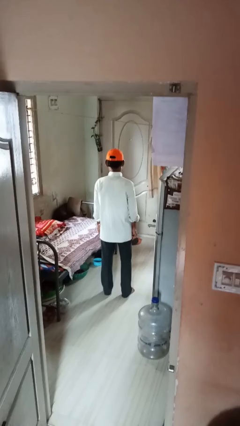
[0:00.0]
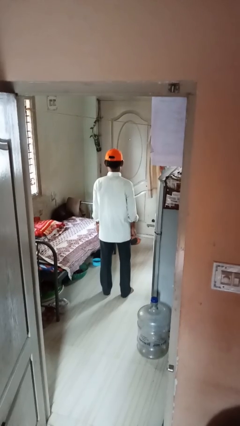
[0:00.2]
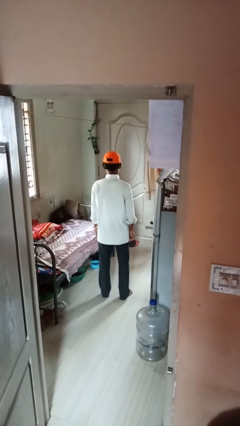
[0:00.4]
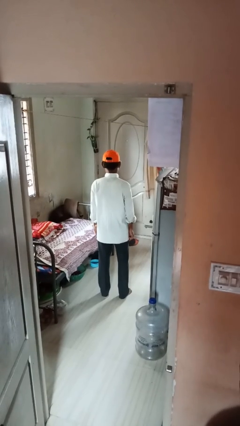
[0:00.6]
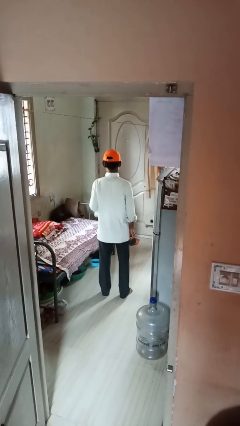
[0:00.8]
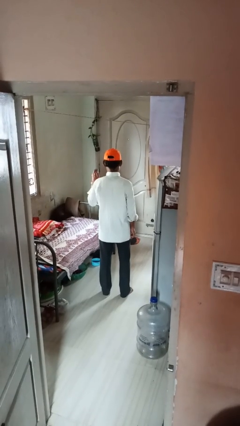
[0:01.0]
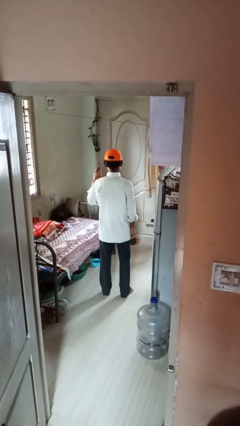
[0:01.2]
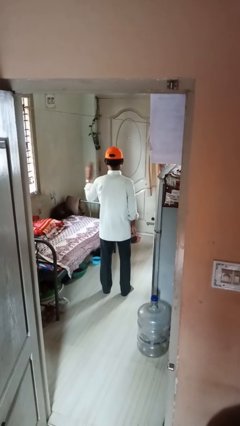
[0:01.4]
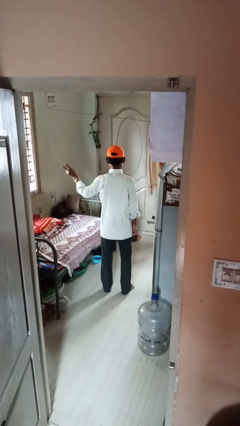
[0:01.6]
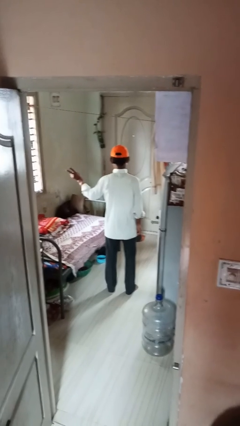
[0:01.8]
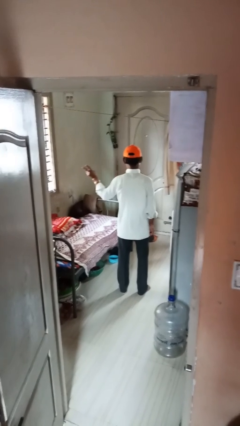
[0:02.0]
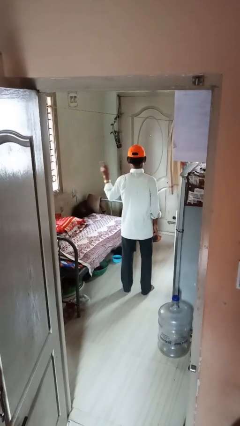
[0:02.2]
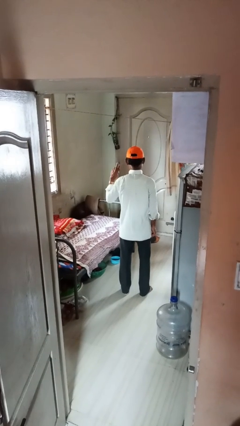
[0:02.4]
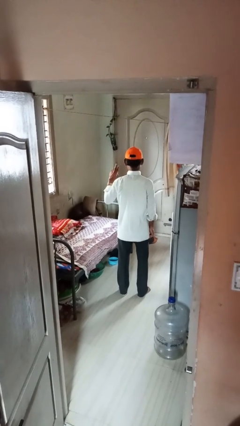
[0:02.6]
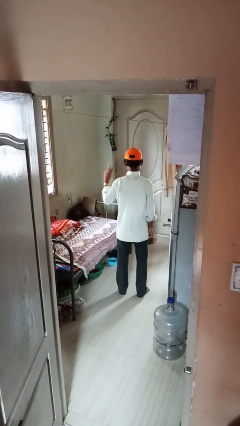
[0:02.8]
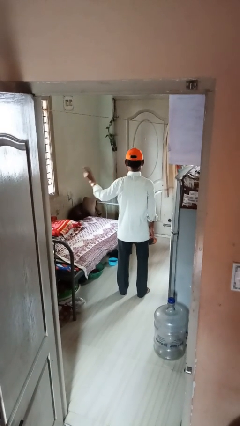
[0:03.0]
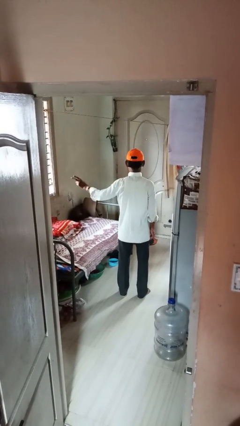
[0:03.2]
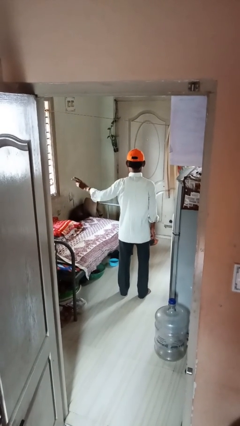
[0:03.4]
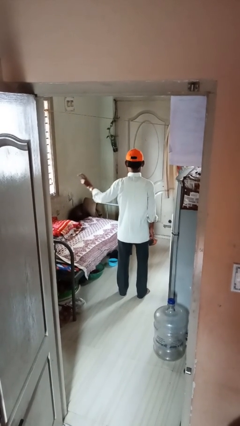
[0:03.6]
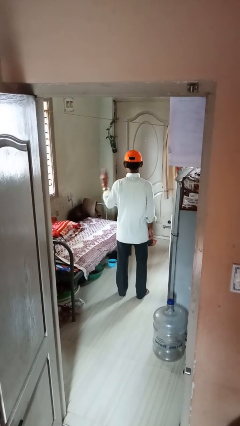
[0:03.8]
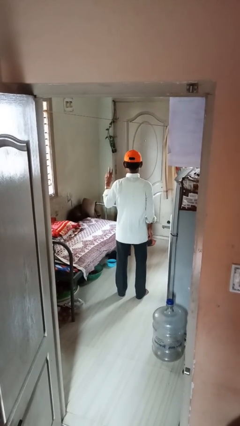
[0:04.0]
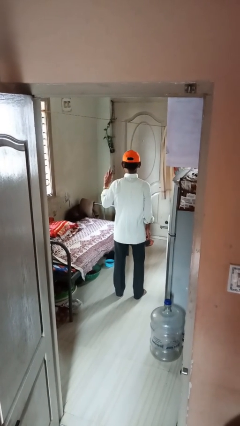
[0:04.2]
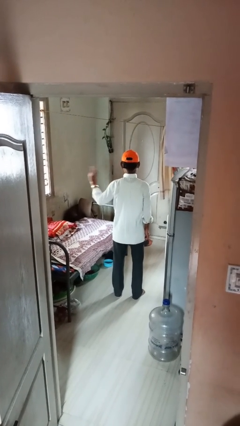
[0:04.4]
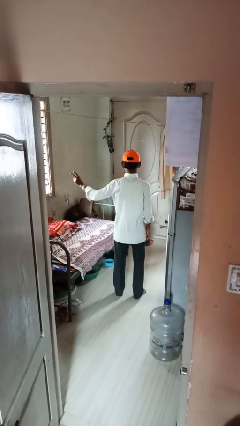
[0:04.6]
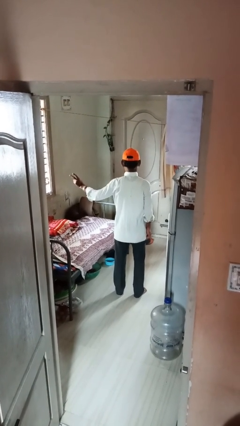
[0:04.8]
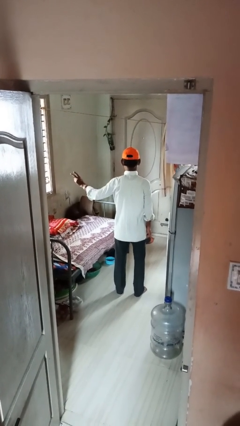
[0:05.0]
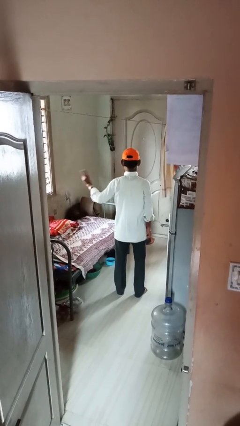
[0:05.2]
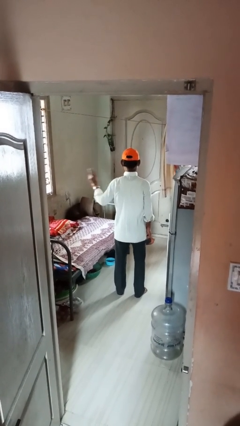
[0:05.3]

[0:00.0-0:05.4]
person gestures swipe left

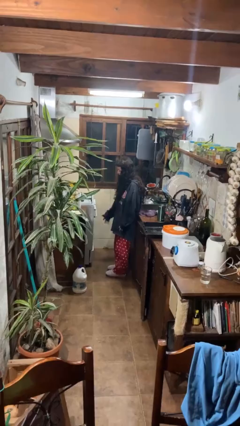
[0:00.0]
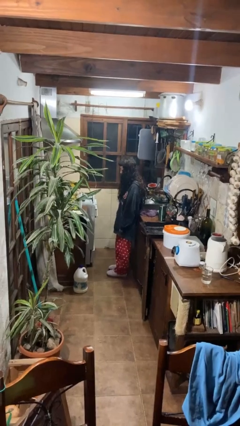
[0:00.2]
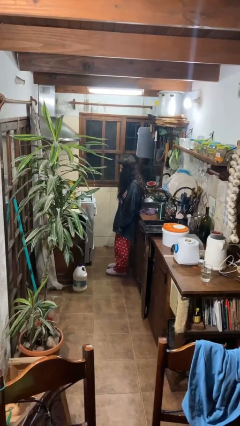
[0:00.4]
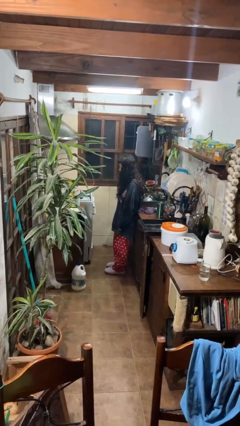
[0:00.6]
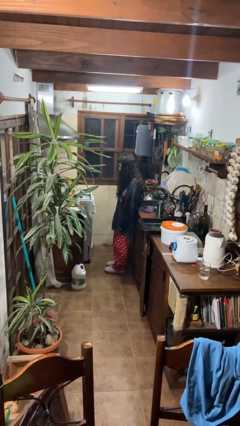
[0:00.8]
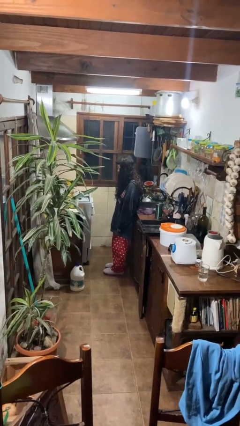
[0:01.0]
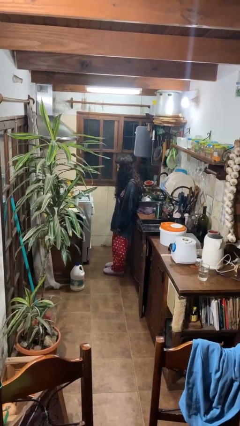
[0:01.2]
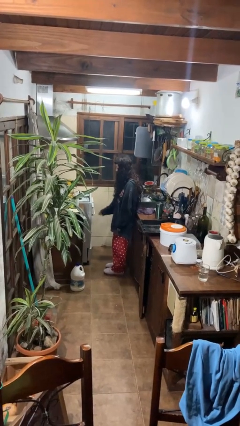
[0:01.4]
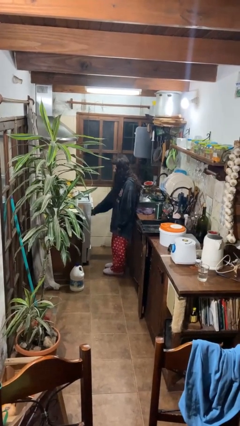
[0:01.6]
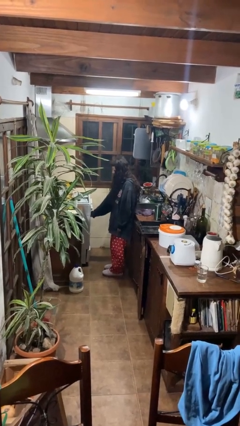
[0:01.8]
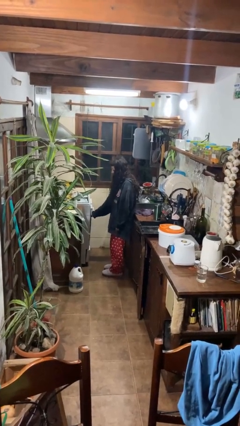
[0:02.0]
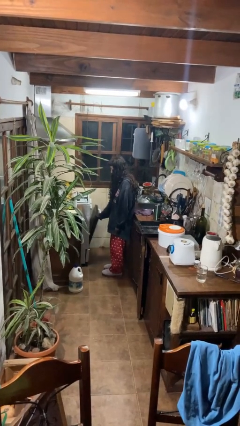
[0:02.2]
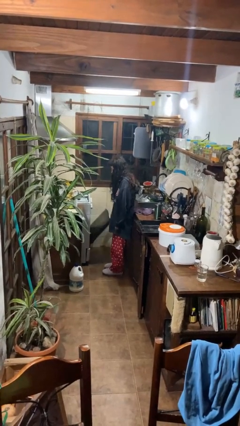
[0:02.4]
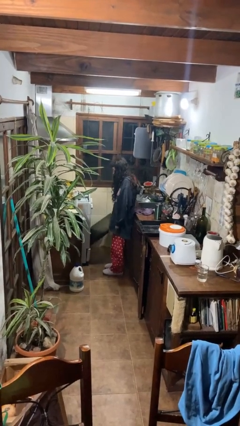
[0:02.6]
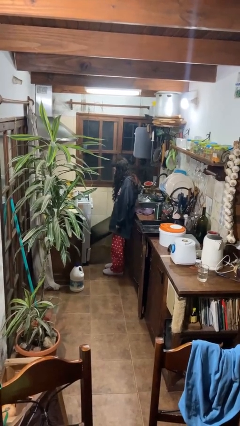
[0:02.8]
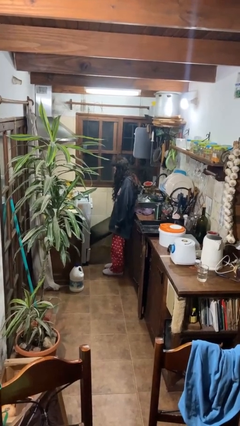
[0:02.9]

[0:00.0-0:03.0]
person opens oven door

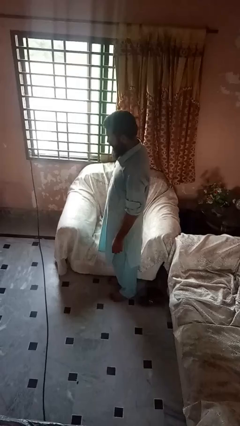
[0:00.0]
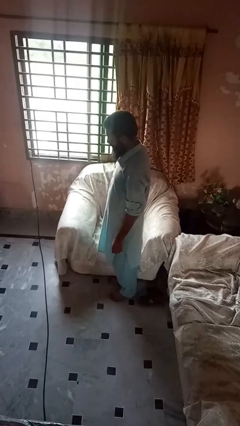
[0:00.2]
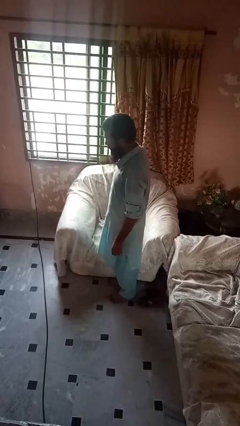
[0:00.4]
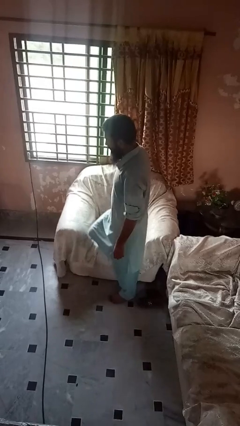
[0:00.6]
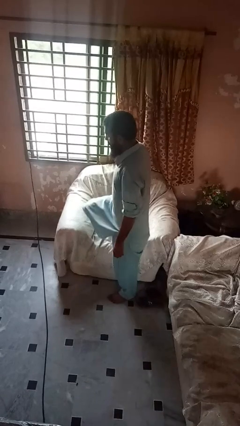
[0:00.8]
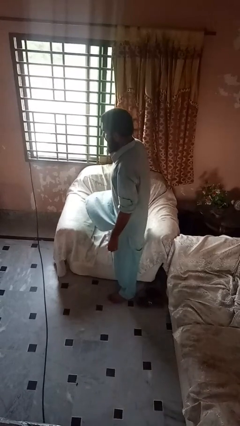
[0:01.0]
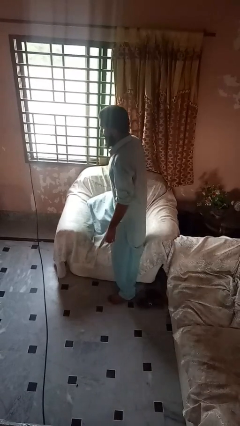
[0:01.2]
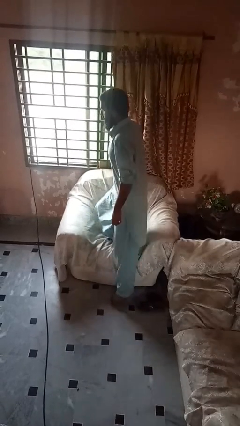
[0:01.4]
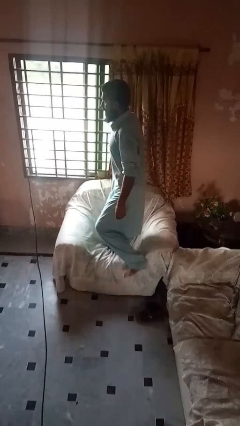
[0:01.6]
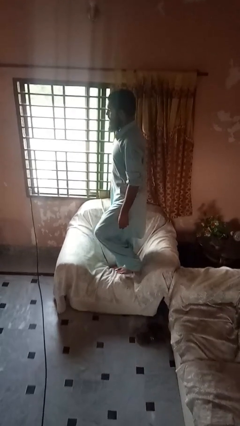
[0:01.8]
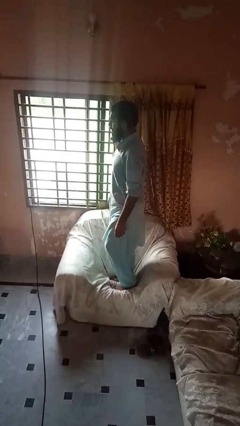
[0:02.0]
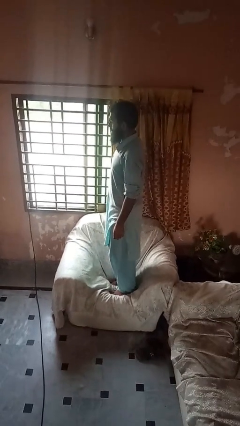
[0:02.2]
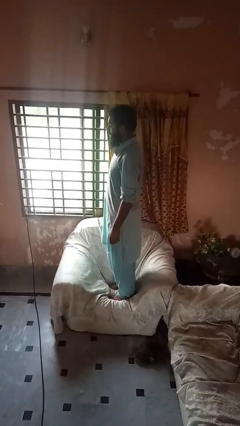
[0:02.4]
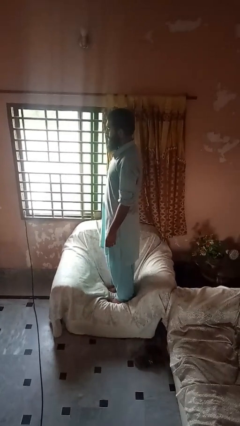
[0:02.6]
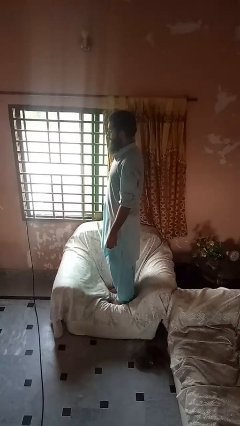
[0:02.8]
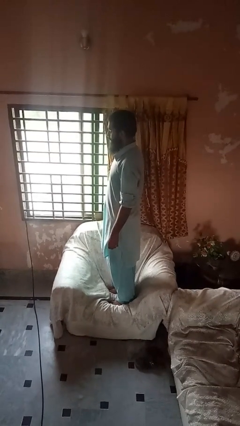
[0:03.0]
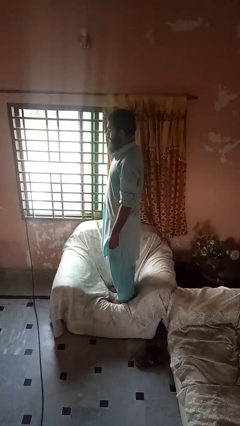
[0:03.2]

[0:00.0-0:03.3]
person climbs on couch

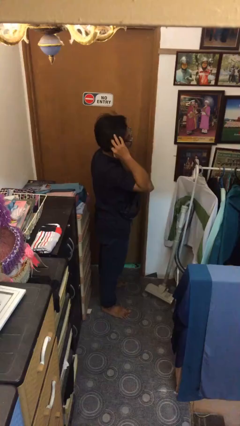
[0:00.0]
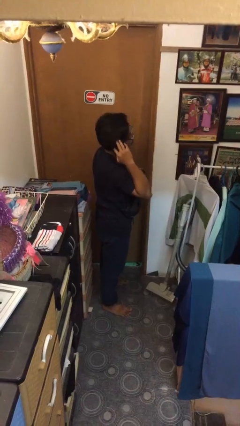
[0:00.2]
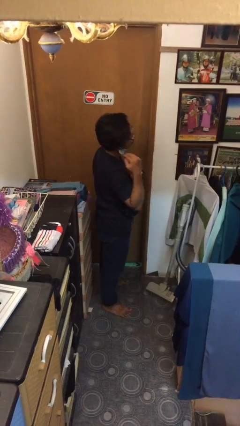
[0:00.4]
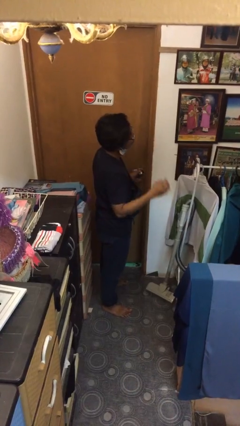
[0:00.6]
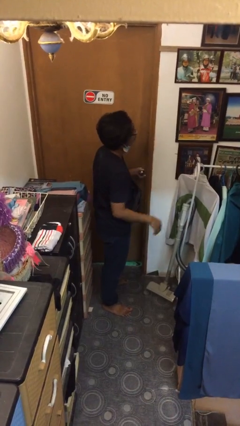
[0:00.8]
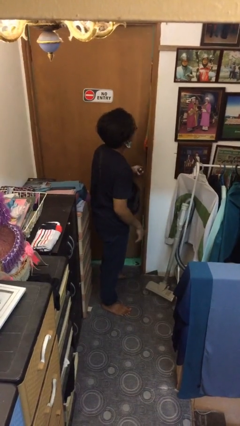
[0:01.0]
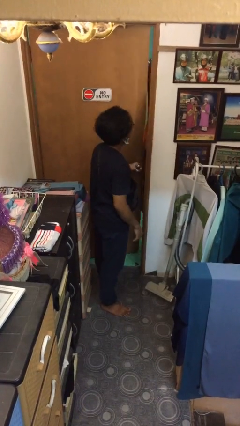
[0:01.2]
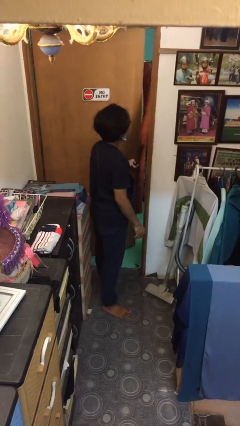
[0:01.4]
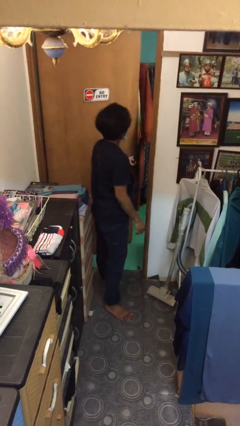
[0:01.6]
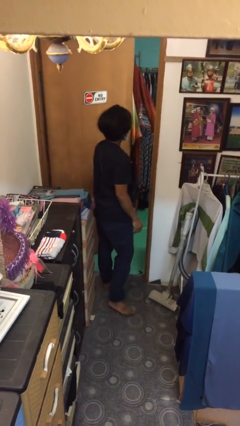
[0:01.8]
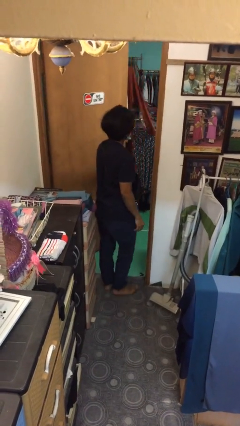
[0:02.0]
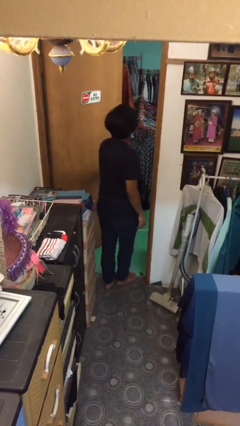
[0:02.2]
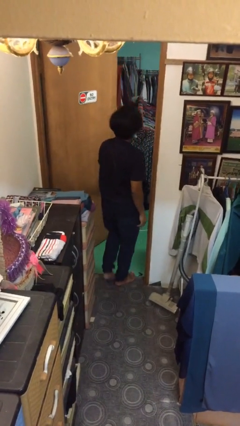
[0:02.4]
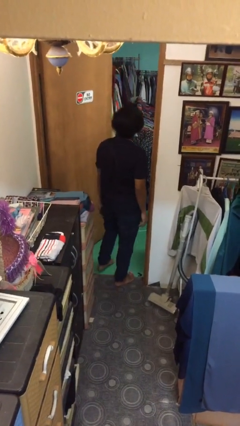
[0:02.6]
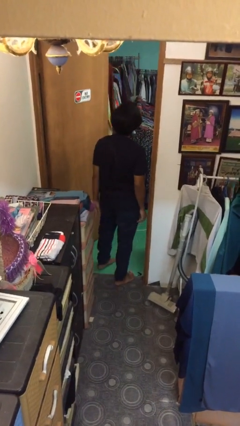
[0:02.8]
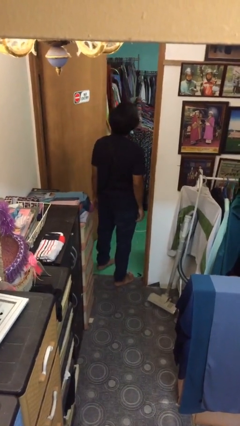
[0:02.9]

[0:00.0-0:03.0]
person opens facility door

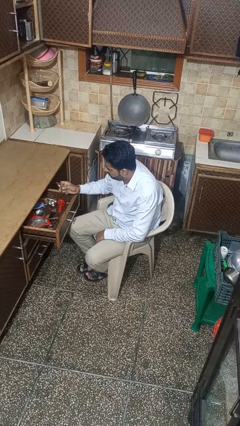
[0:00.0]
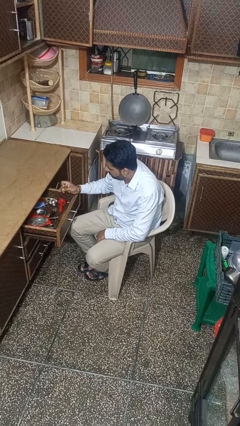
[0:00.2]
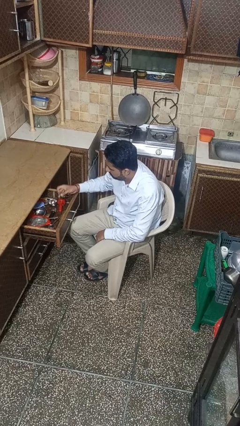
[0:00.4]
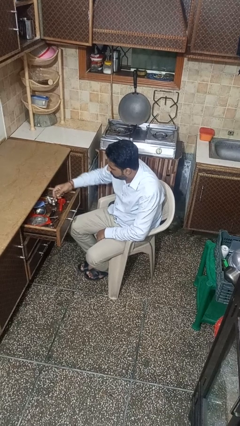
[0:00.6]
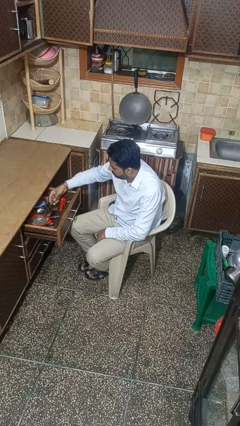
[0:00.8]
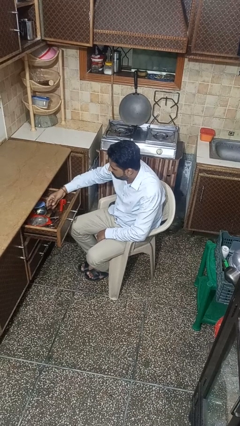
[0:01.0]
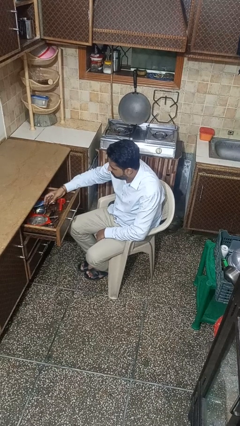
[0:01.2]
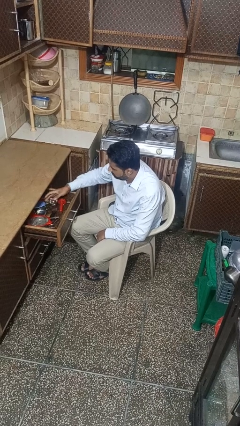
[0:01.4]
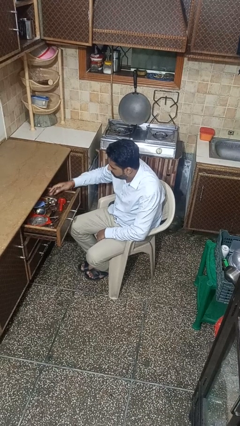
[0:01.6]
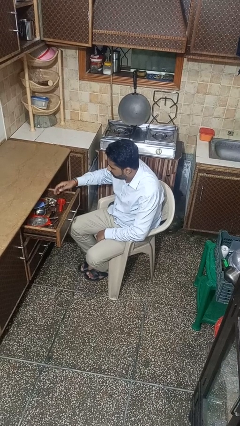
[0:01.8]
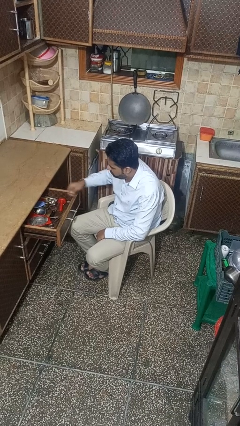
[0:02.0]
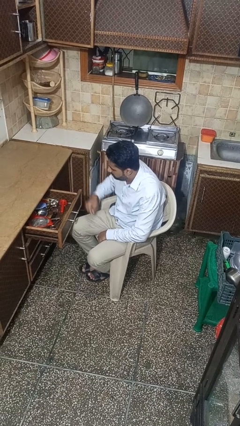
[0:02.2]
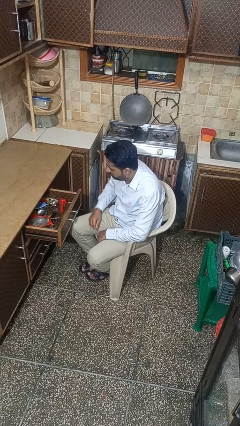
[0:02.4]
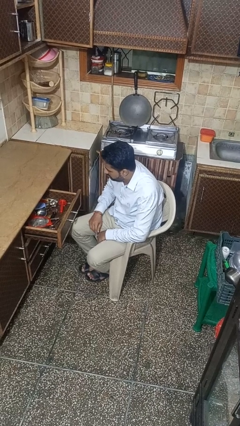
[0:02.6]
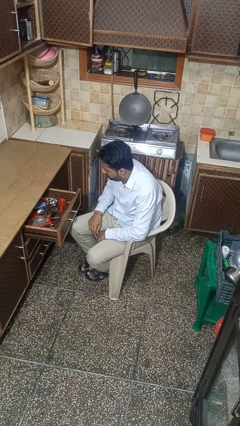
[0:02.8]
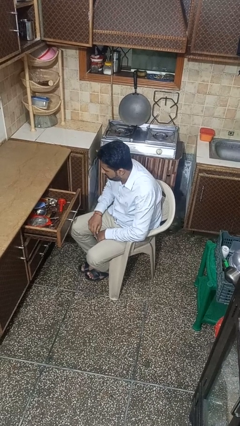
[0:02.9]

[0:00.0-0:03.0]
person puts object into kitchen drawer
